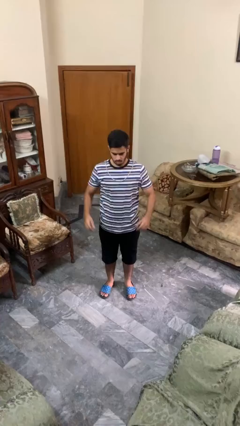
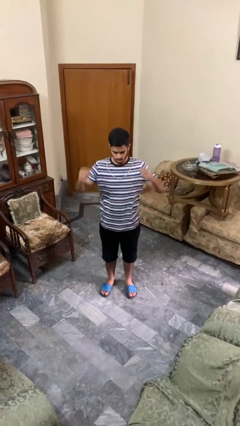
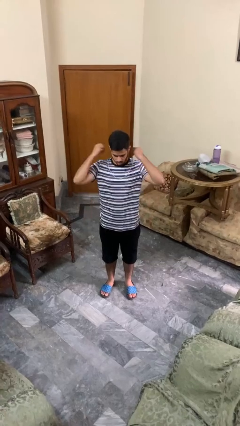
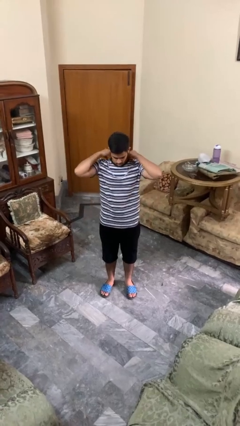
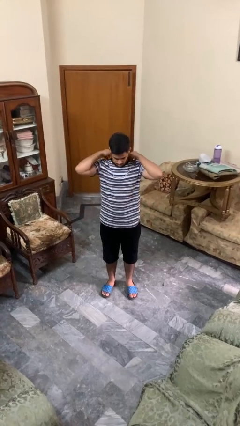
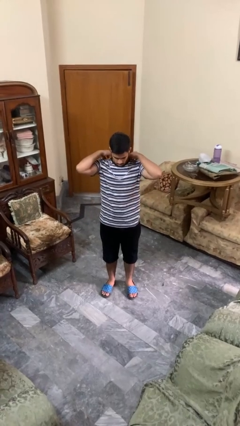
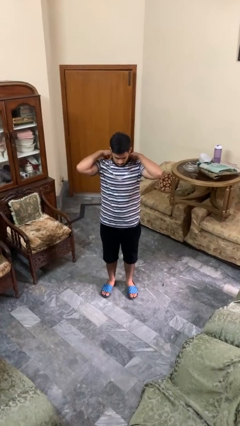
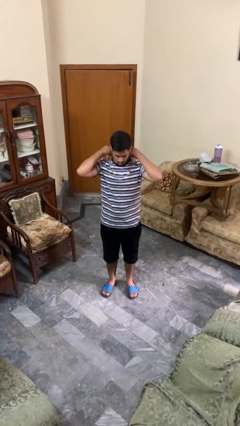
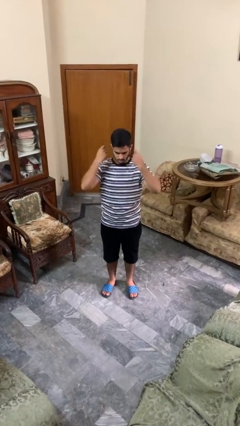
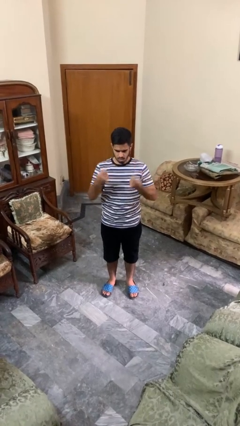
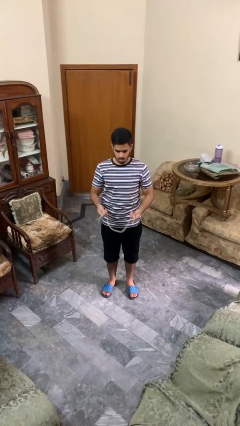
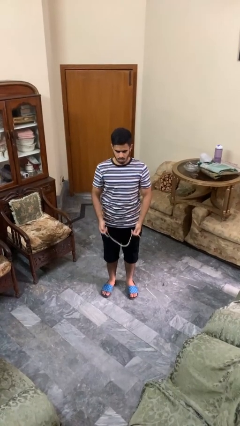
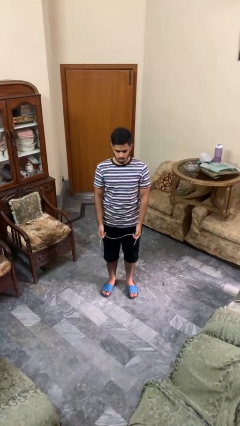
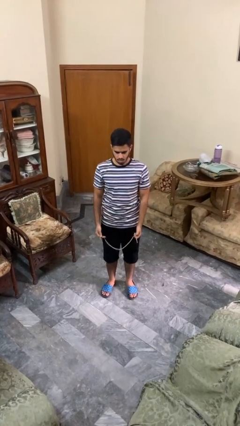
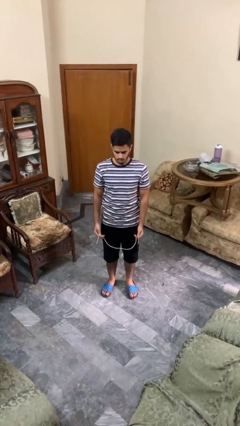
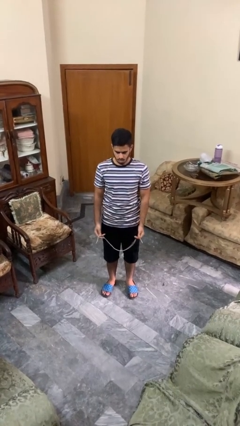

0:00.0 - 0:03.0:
person takes off necklace

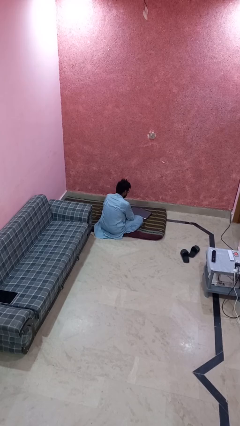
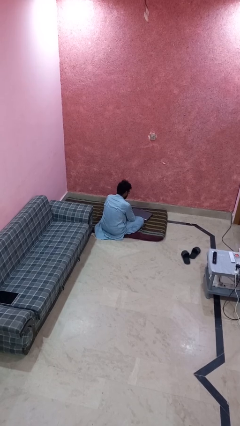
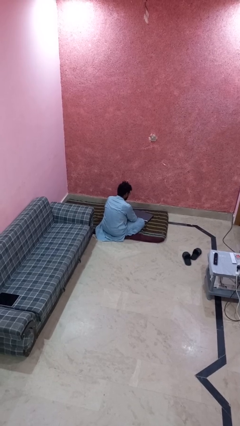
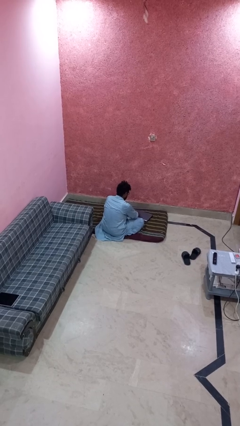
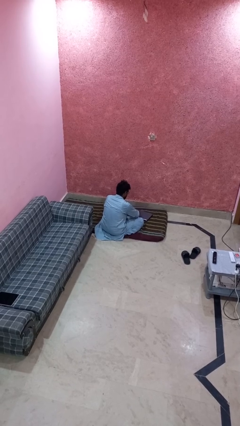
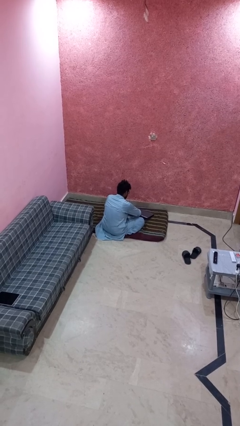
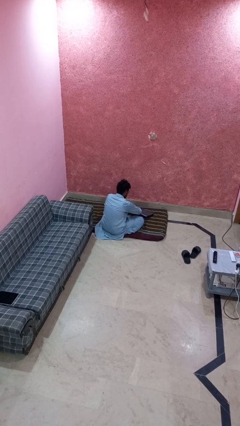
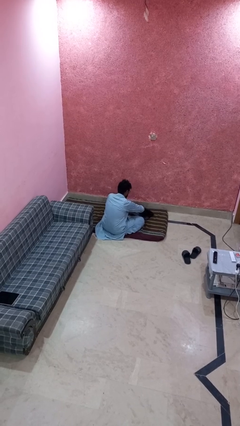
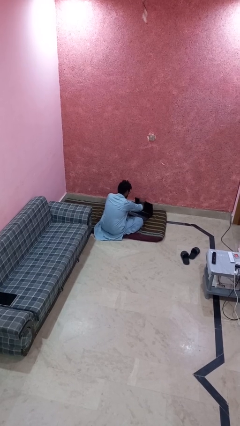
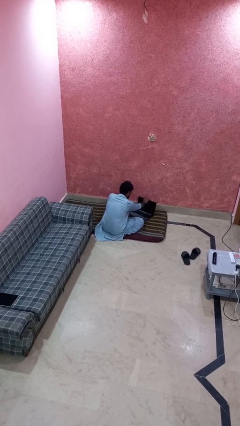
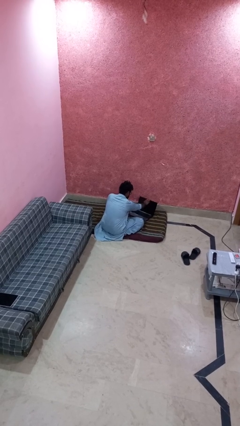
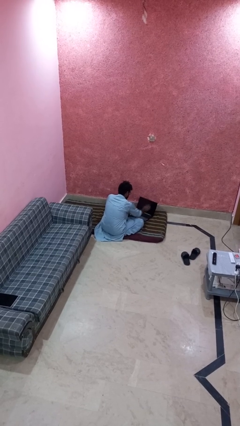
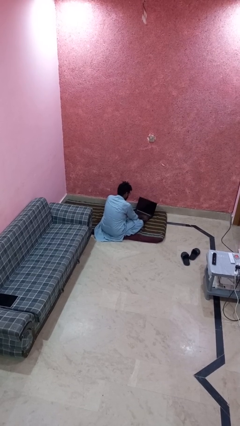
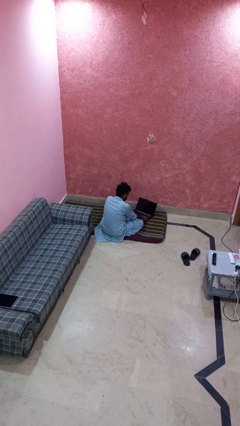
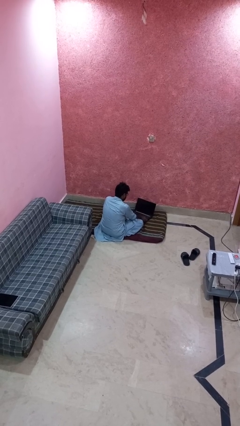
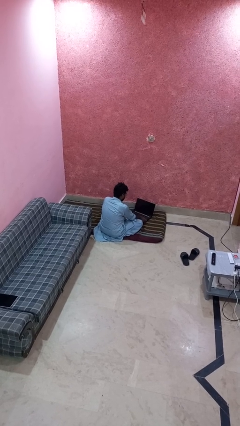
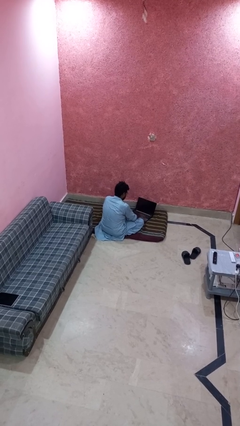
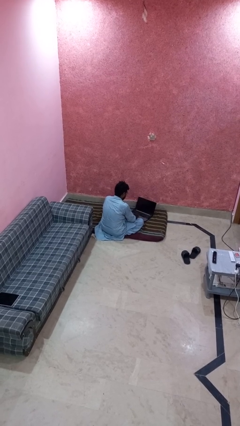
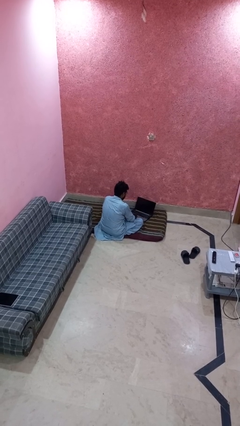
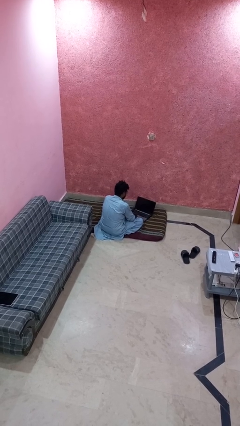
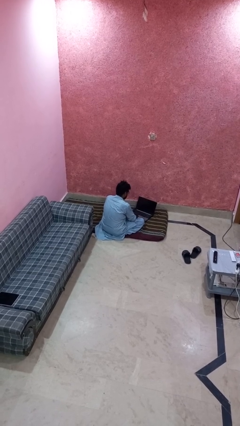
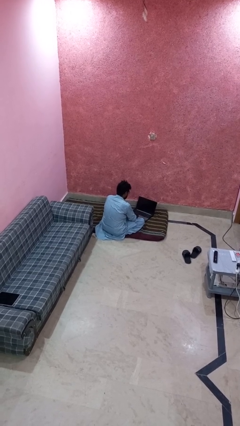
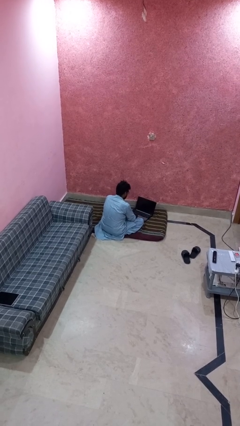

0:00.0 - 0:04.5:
person opens laptop

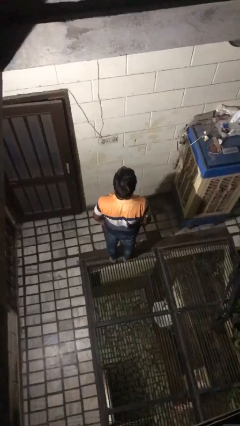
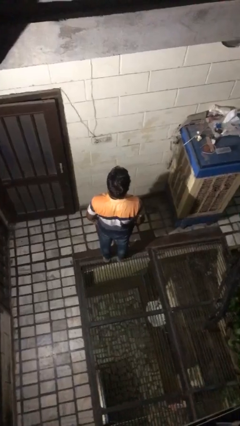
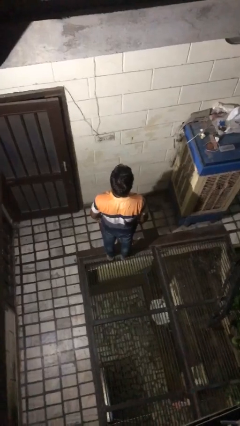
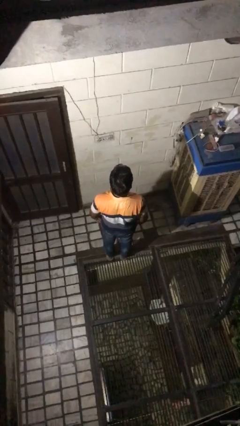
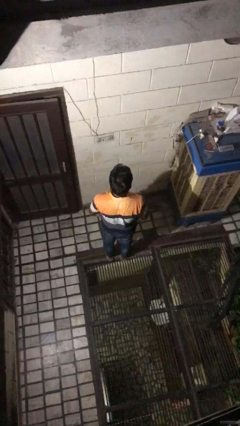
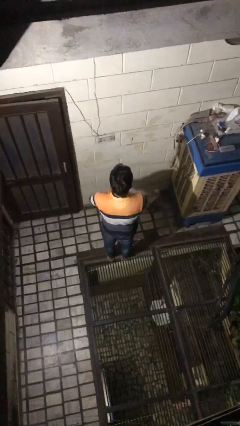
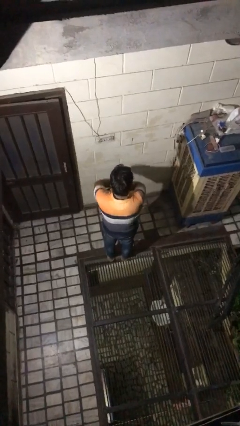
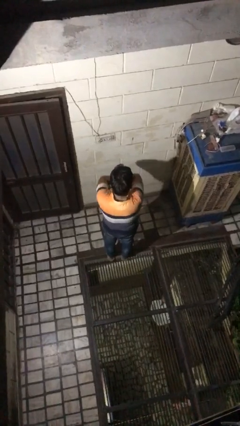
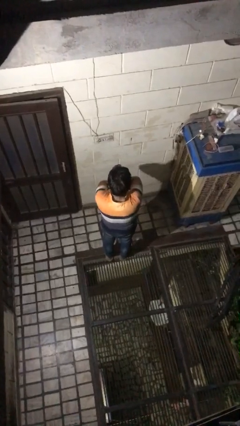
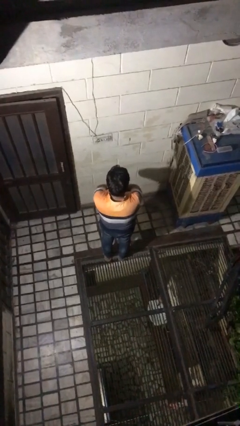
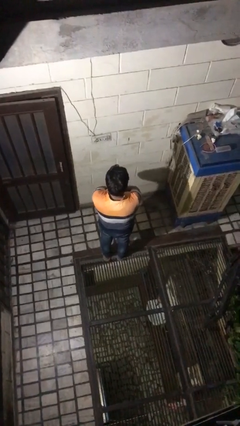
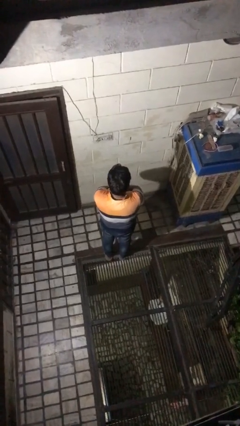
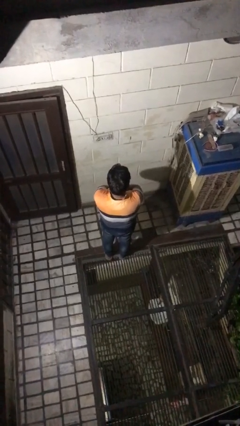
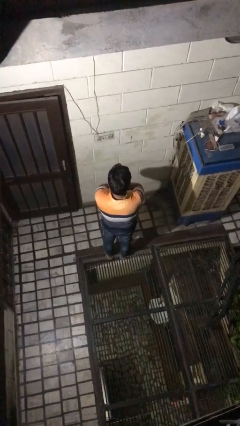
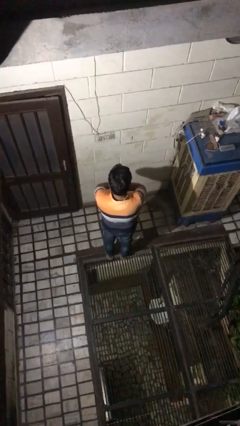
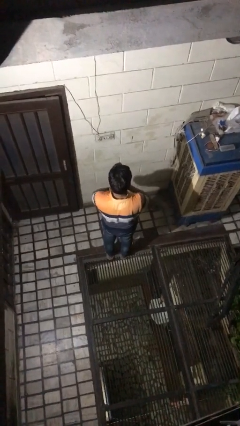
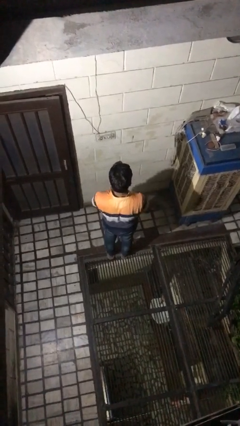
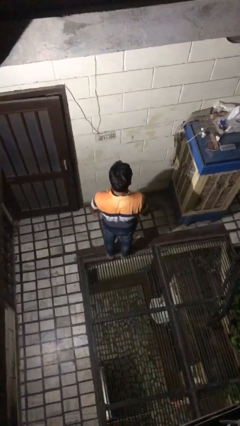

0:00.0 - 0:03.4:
person crosses arms

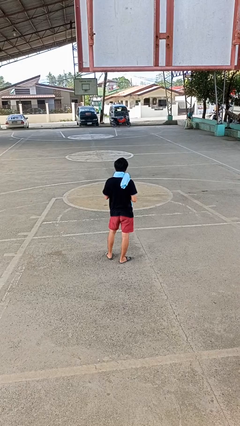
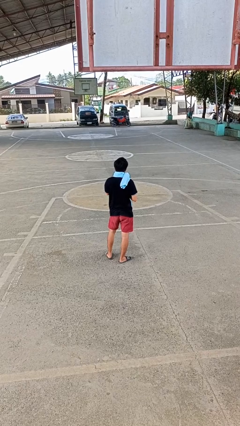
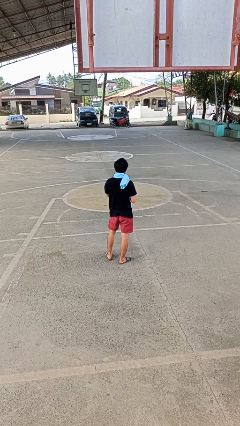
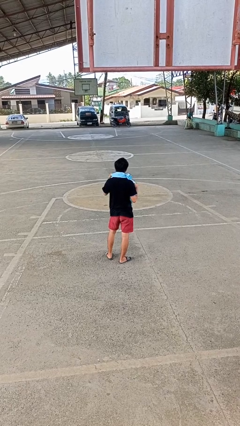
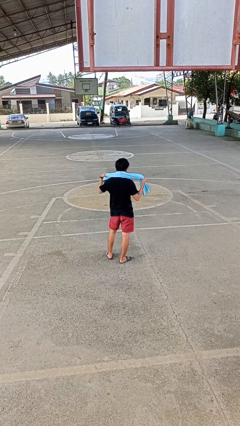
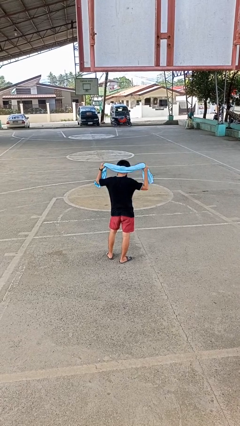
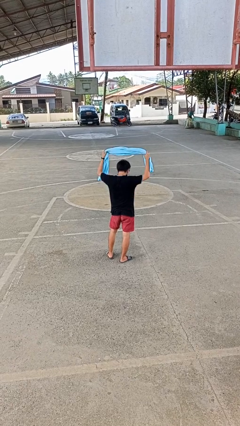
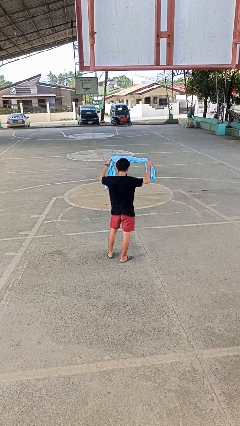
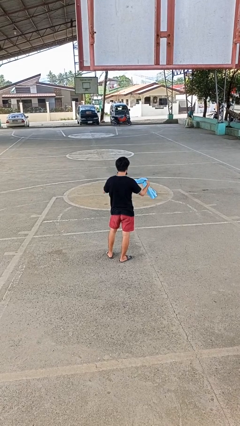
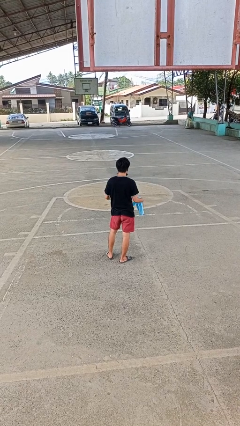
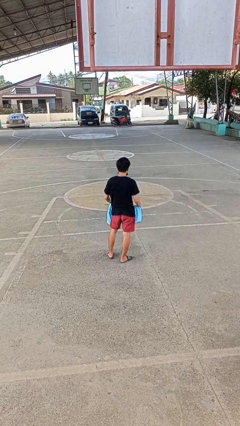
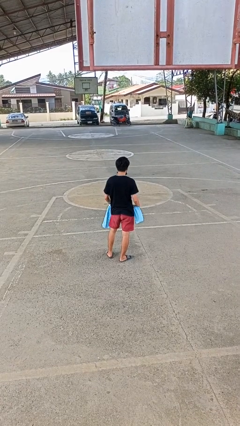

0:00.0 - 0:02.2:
person takes off scarf

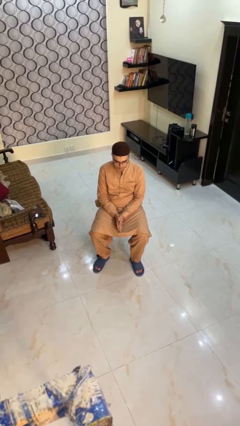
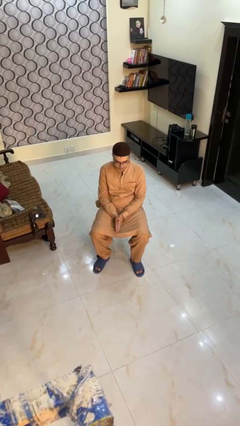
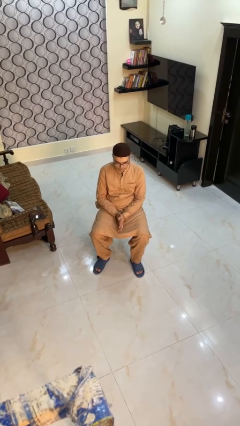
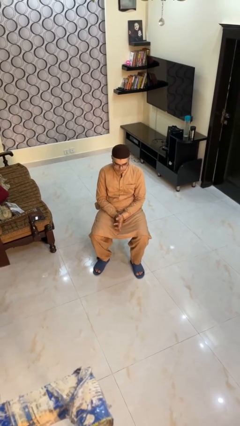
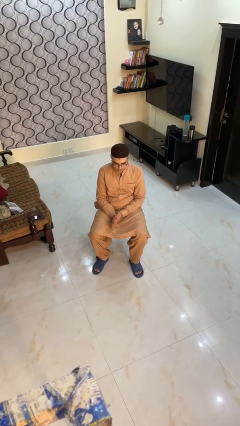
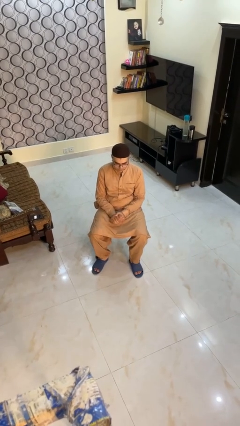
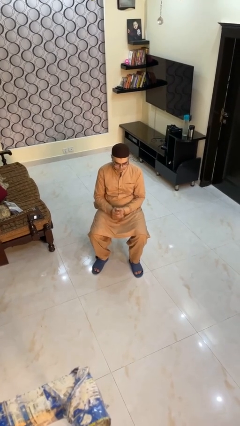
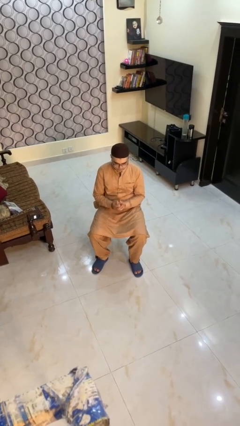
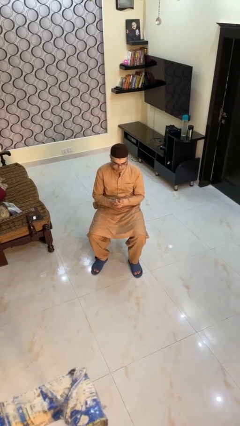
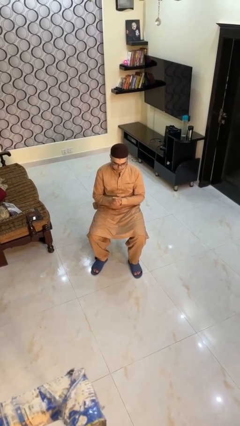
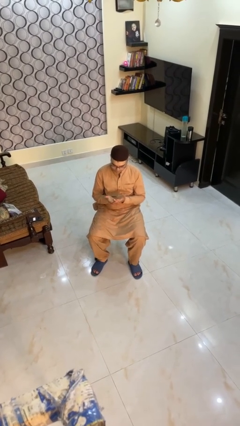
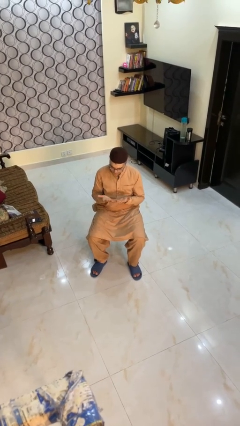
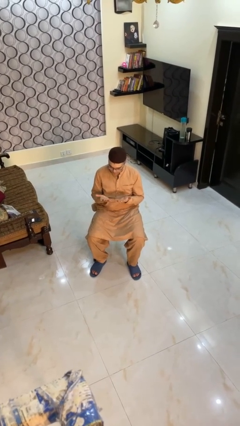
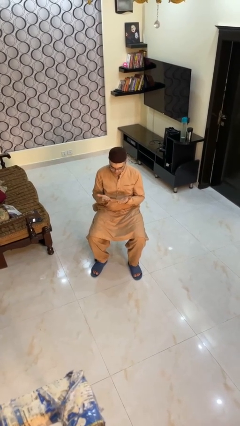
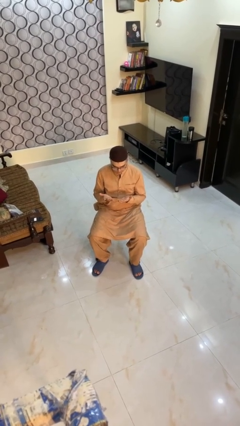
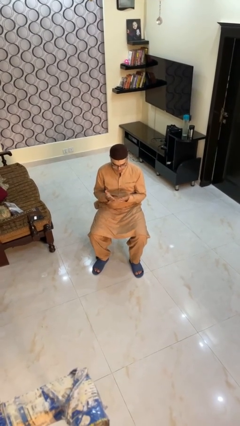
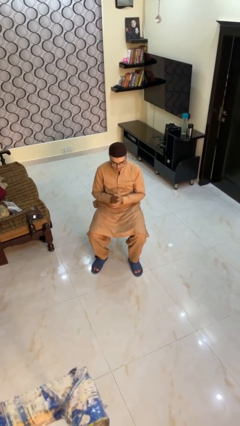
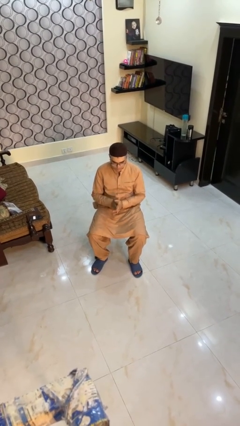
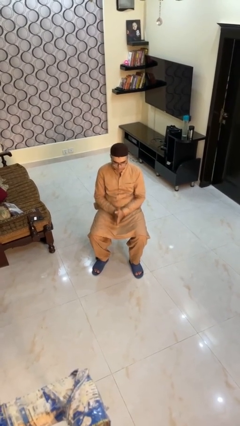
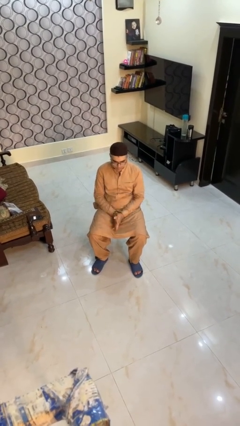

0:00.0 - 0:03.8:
person looks at hands in lap

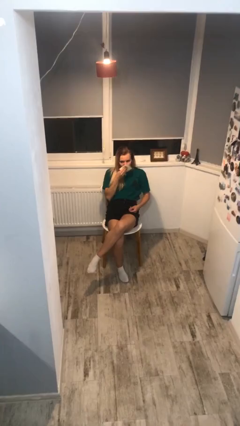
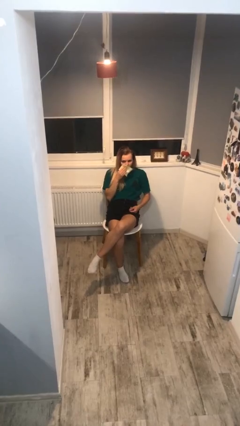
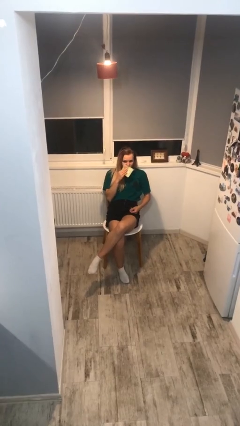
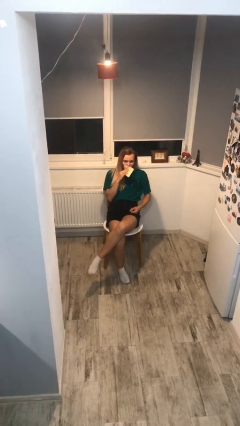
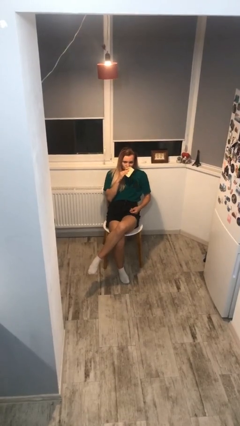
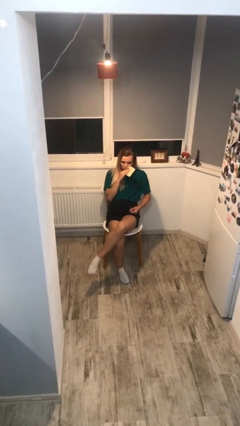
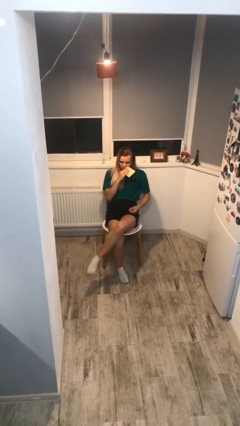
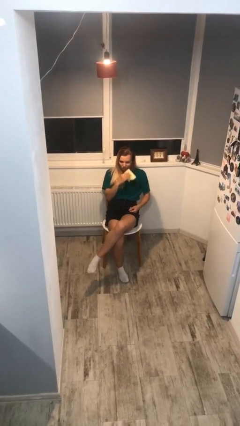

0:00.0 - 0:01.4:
person wipes mouth with napkin
